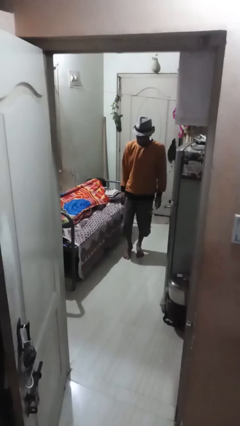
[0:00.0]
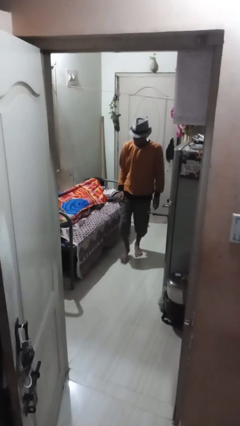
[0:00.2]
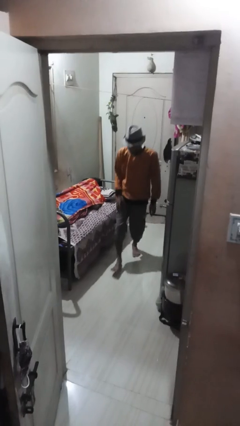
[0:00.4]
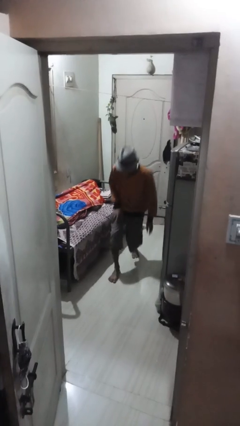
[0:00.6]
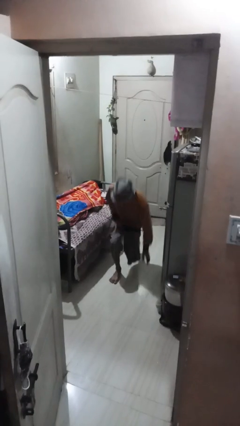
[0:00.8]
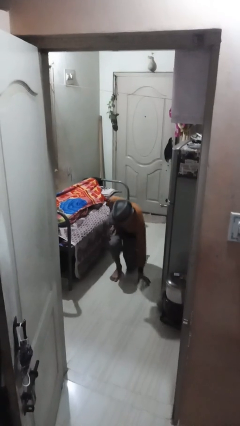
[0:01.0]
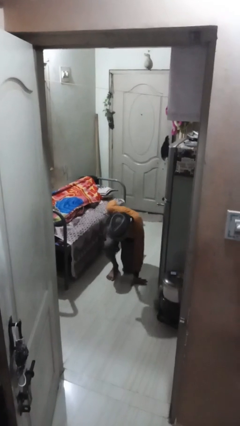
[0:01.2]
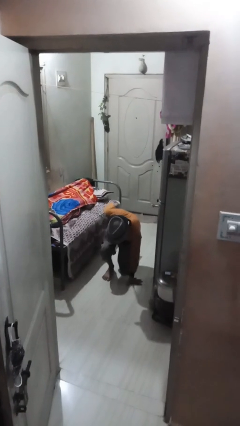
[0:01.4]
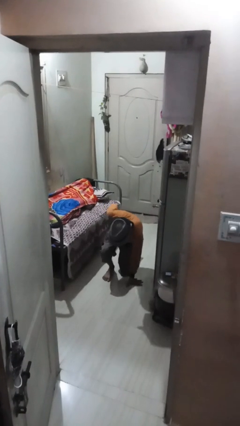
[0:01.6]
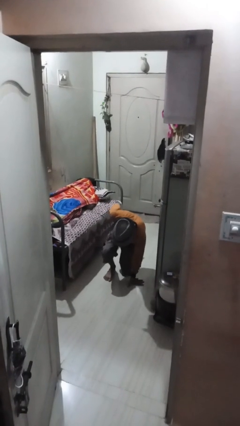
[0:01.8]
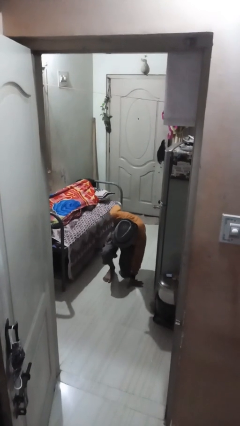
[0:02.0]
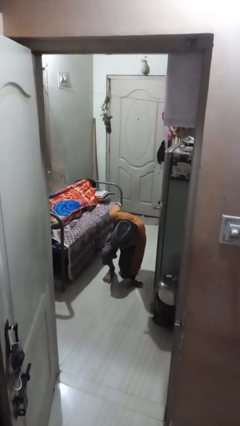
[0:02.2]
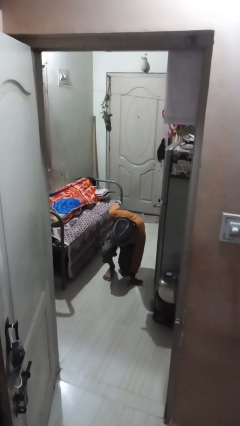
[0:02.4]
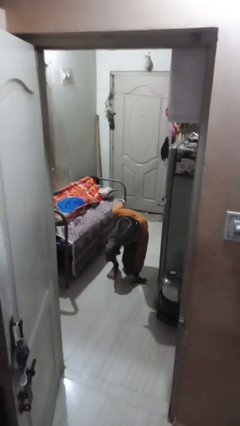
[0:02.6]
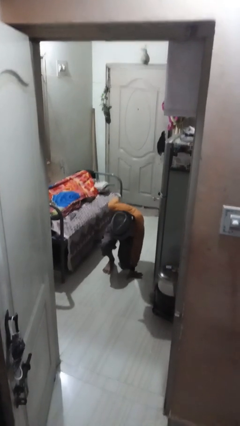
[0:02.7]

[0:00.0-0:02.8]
person kneels

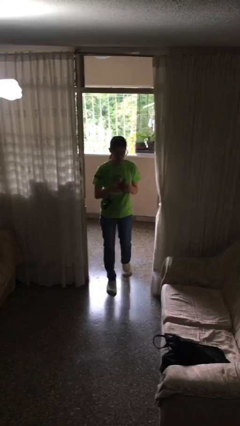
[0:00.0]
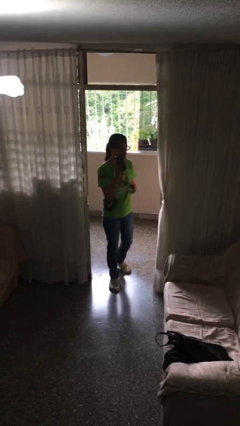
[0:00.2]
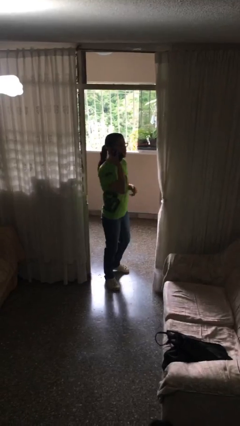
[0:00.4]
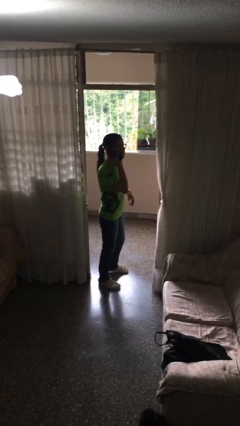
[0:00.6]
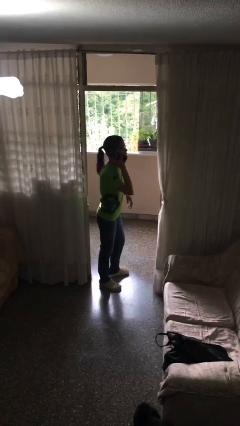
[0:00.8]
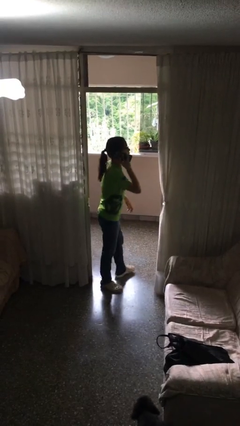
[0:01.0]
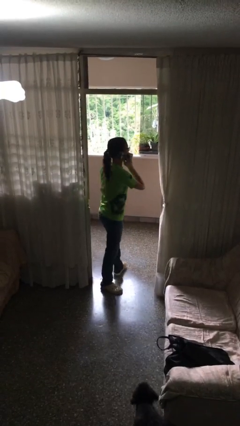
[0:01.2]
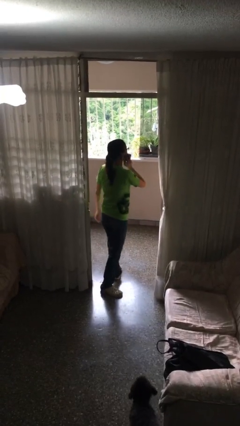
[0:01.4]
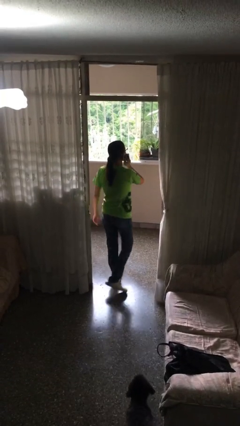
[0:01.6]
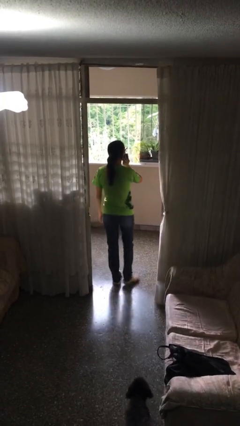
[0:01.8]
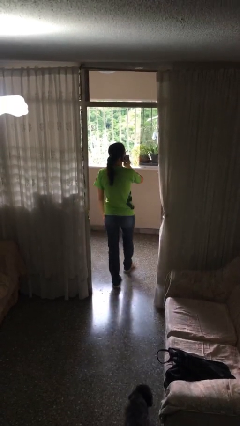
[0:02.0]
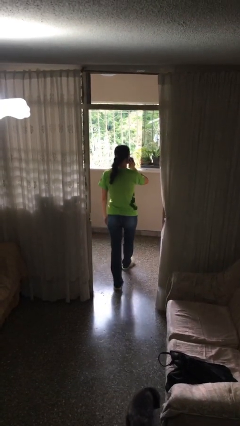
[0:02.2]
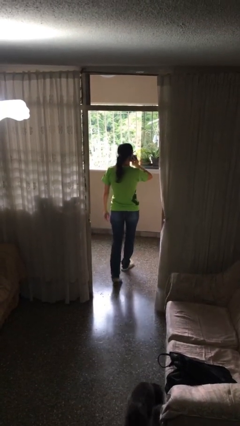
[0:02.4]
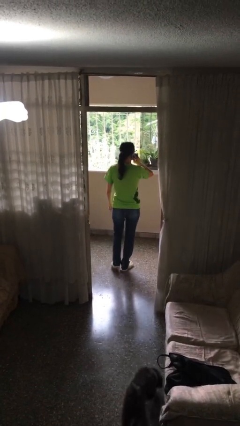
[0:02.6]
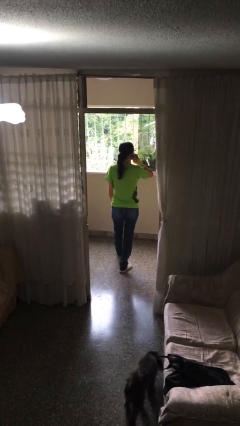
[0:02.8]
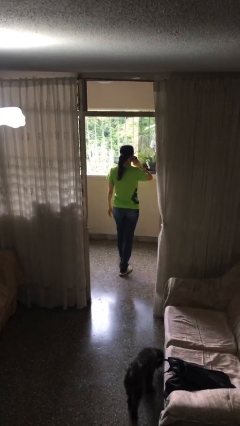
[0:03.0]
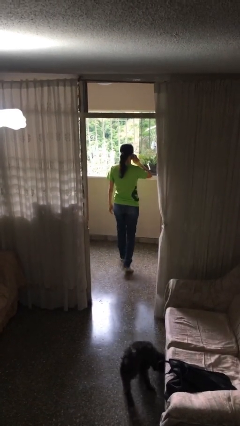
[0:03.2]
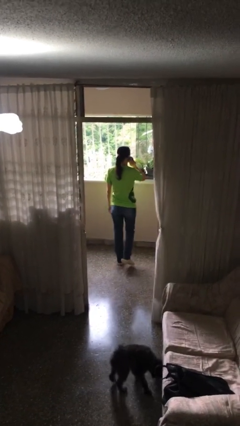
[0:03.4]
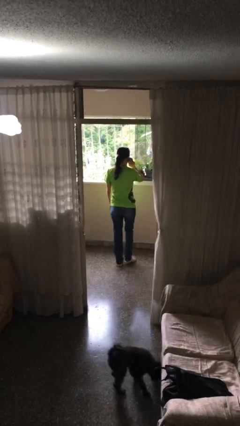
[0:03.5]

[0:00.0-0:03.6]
person talks on phone

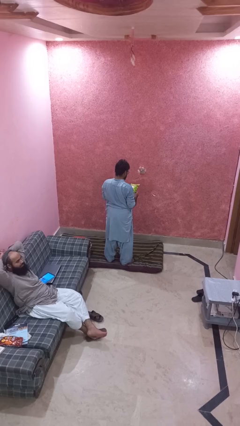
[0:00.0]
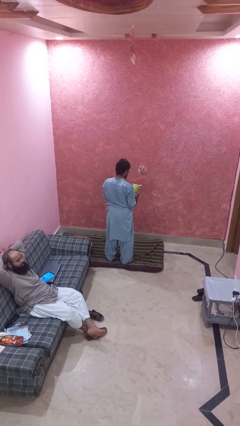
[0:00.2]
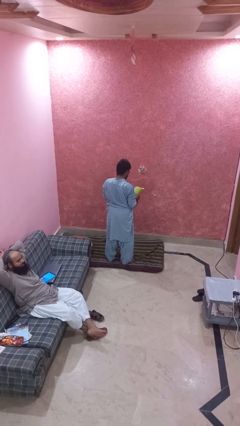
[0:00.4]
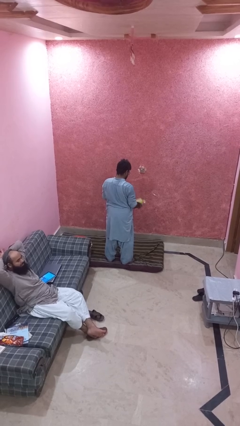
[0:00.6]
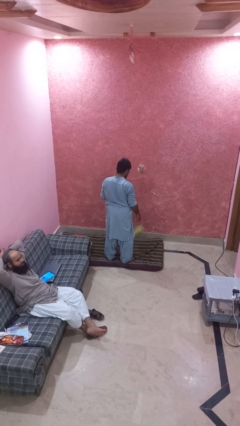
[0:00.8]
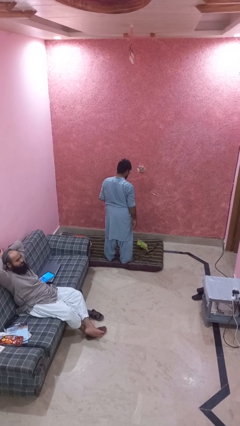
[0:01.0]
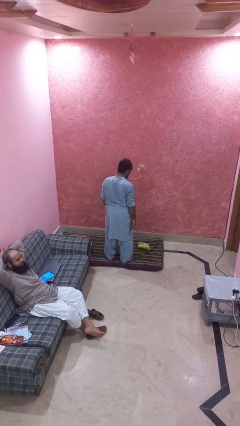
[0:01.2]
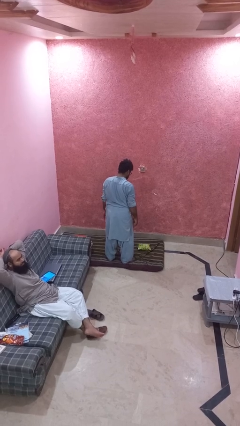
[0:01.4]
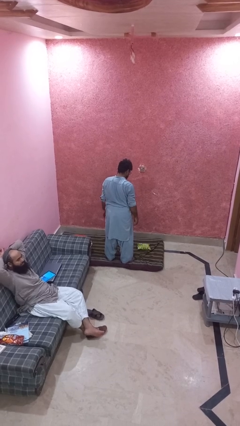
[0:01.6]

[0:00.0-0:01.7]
person drops object

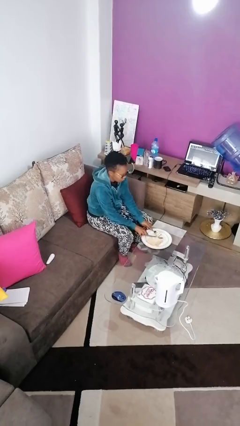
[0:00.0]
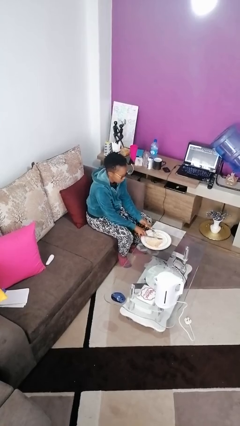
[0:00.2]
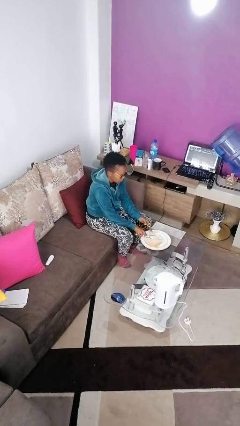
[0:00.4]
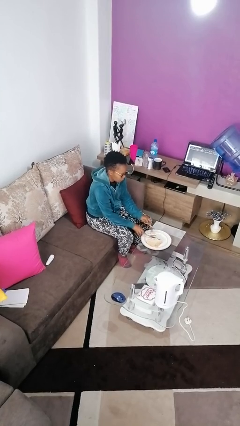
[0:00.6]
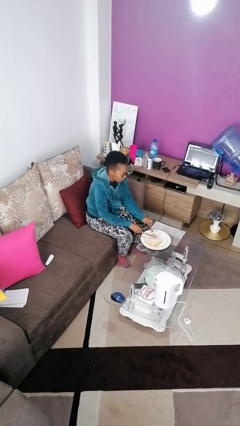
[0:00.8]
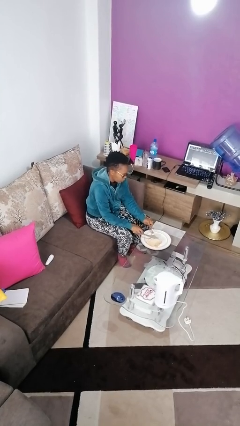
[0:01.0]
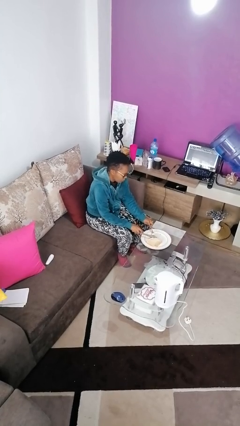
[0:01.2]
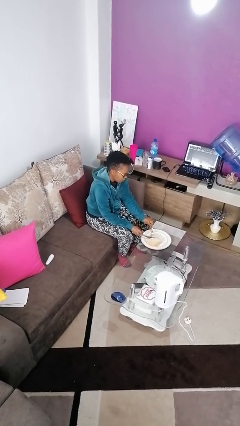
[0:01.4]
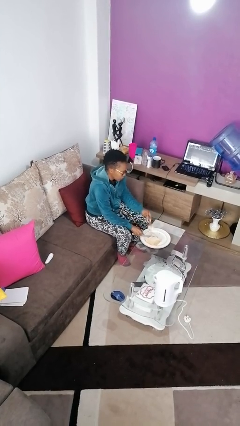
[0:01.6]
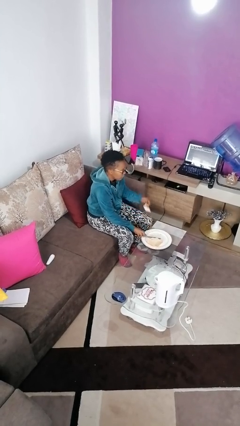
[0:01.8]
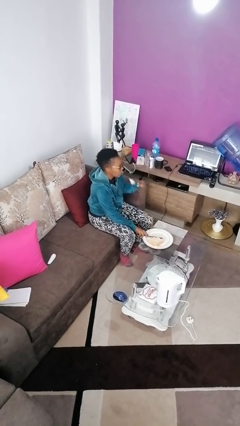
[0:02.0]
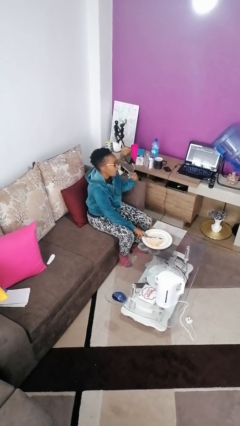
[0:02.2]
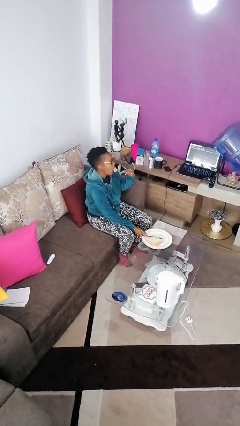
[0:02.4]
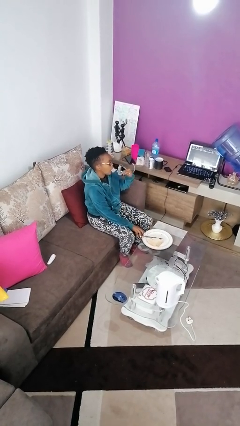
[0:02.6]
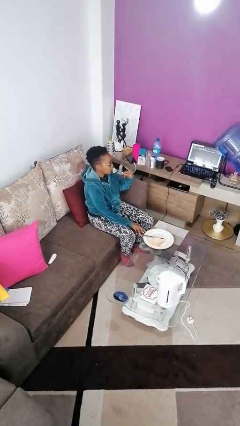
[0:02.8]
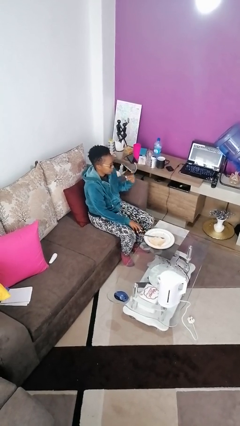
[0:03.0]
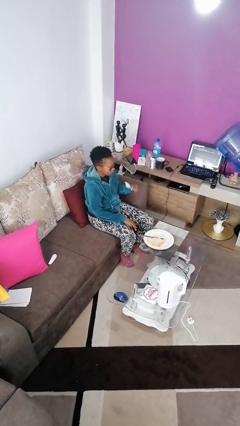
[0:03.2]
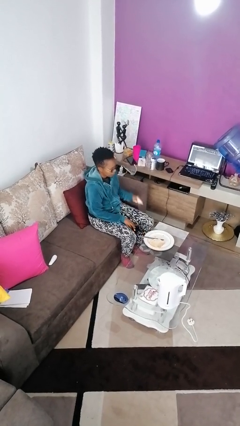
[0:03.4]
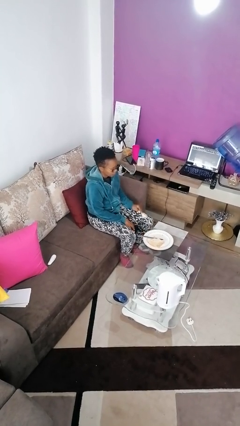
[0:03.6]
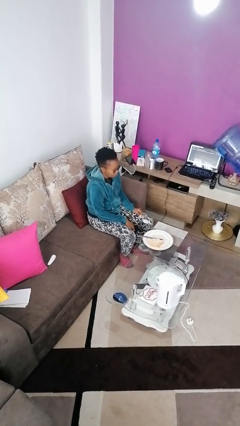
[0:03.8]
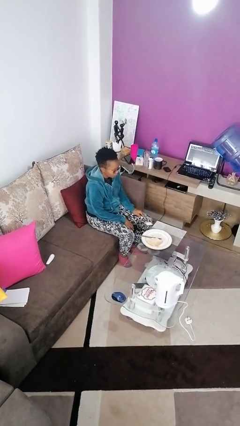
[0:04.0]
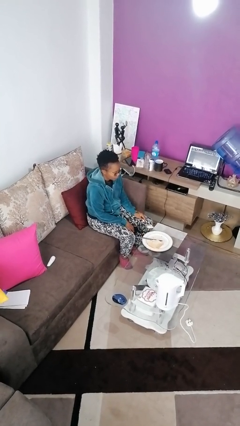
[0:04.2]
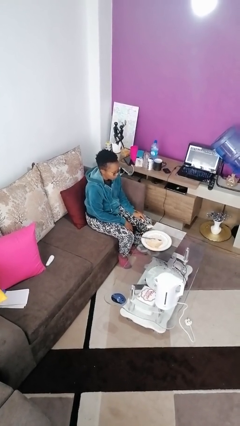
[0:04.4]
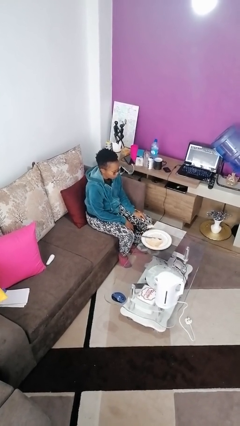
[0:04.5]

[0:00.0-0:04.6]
person eats with utensil

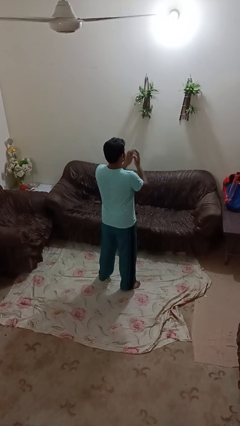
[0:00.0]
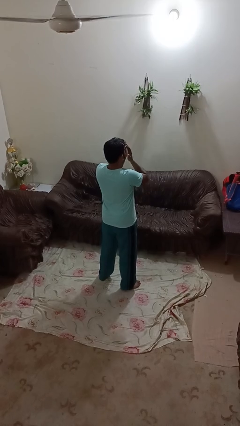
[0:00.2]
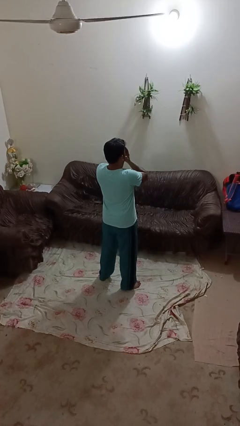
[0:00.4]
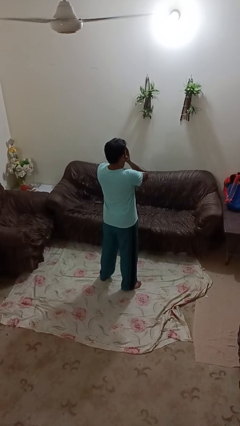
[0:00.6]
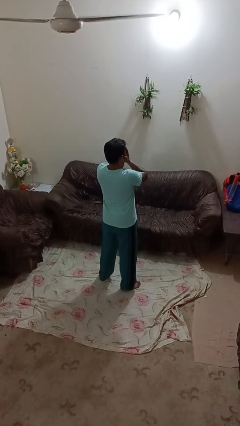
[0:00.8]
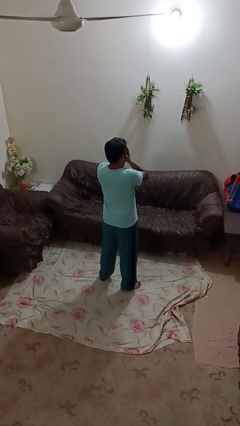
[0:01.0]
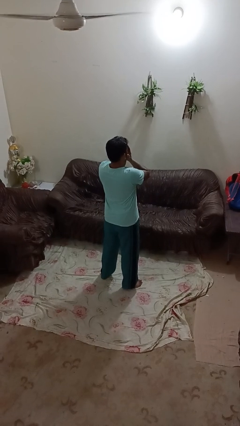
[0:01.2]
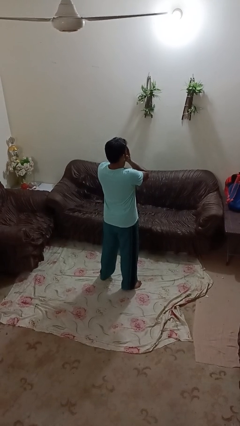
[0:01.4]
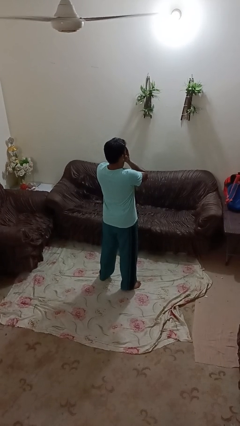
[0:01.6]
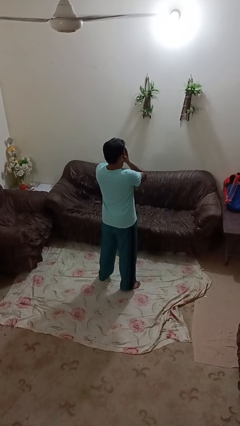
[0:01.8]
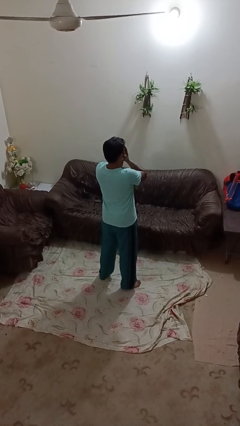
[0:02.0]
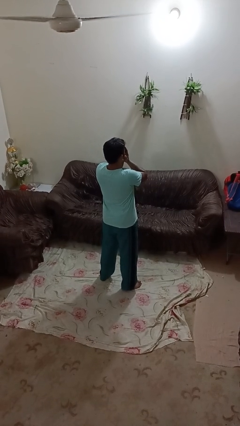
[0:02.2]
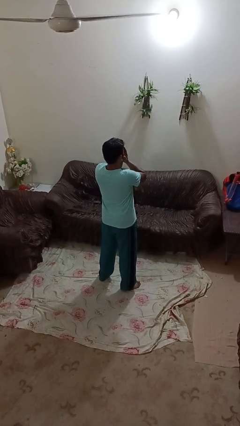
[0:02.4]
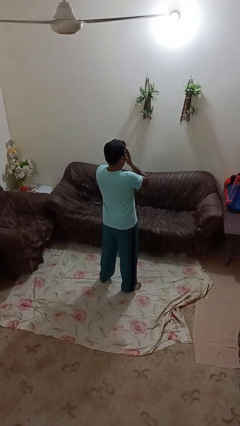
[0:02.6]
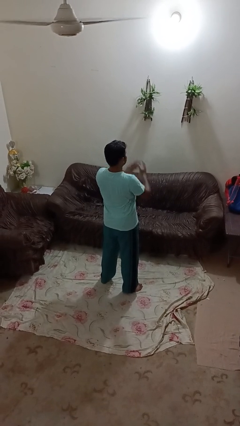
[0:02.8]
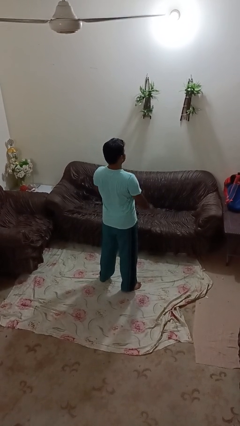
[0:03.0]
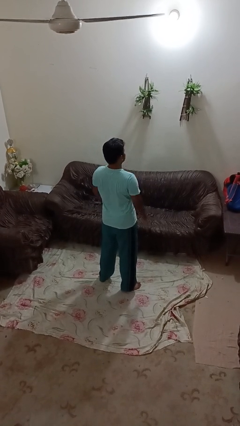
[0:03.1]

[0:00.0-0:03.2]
person covers face with hands

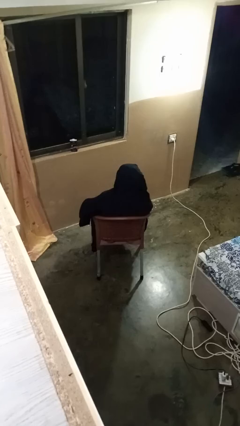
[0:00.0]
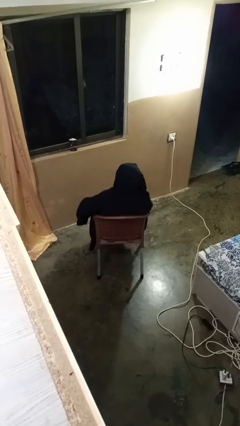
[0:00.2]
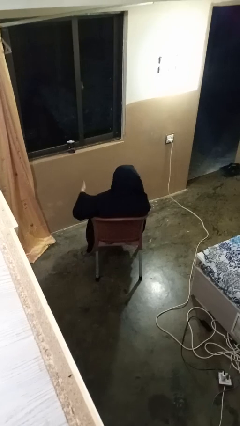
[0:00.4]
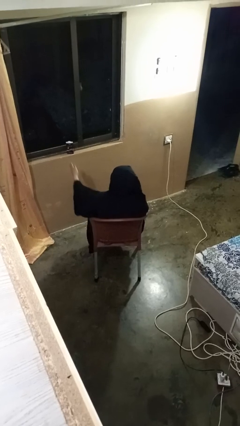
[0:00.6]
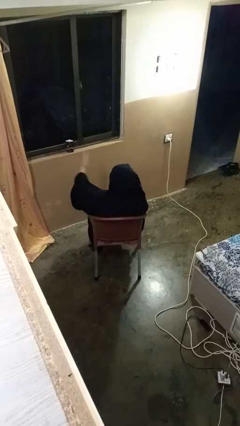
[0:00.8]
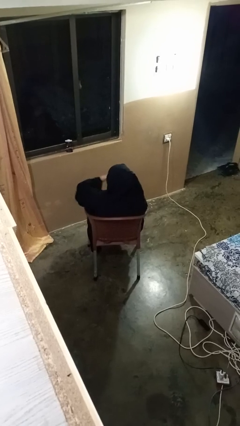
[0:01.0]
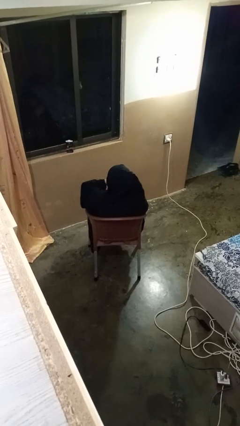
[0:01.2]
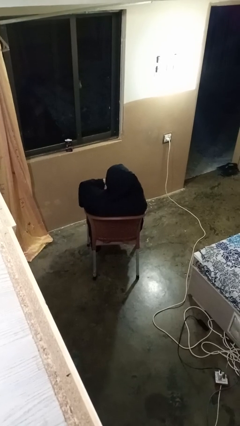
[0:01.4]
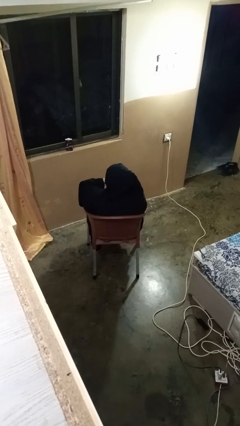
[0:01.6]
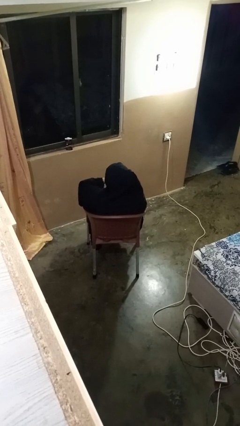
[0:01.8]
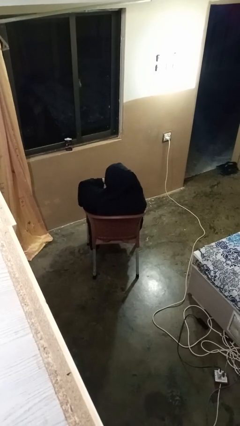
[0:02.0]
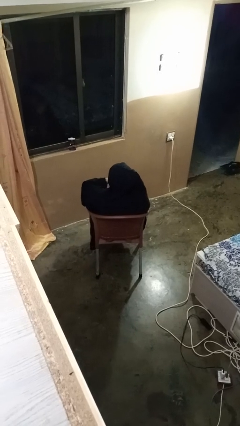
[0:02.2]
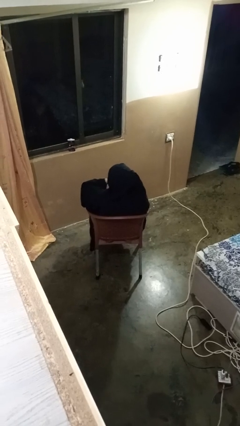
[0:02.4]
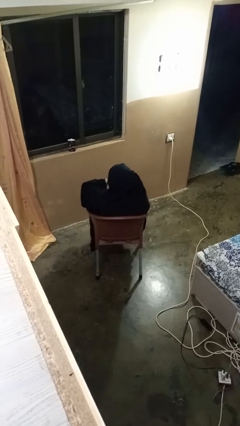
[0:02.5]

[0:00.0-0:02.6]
person gestures swipe up
